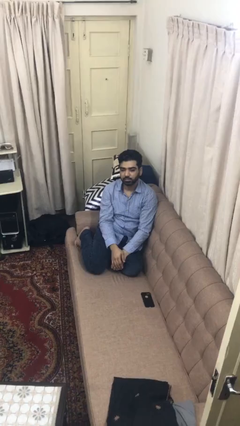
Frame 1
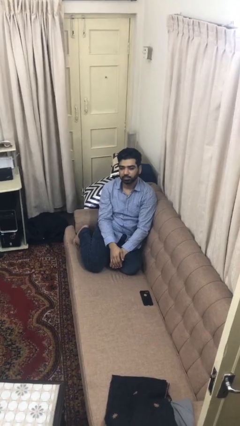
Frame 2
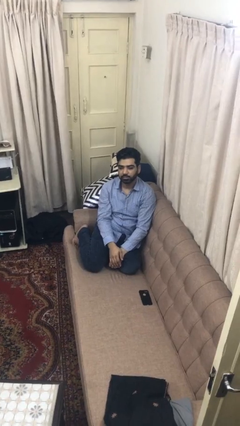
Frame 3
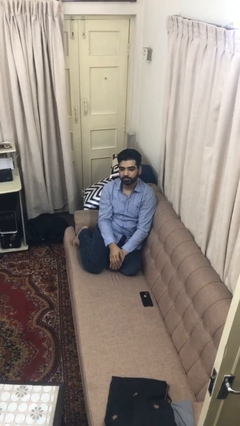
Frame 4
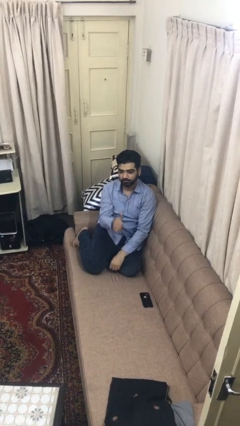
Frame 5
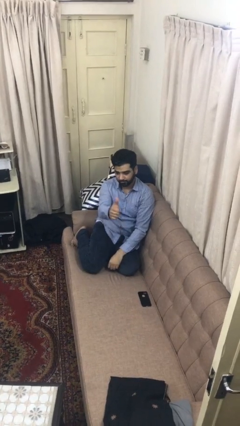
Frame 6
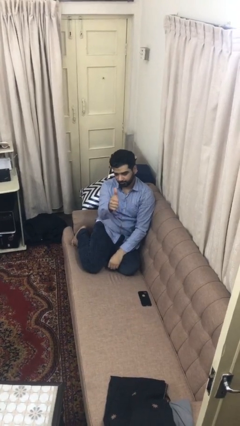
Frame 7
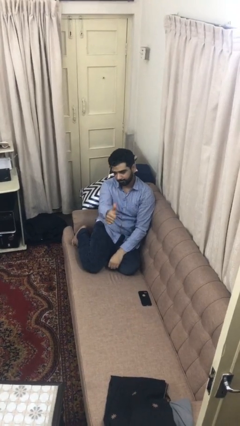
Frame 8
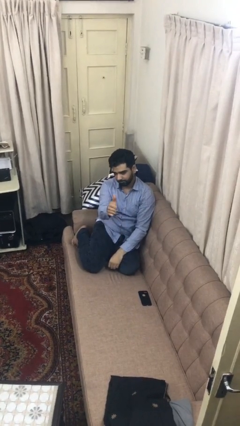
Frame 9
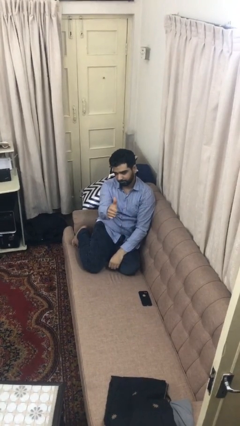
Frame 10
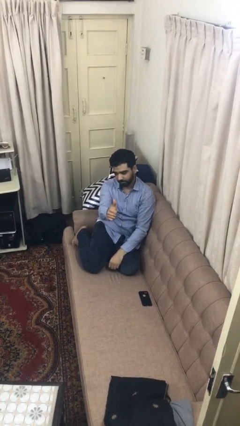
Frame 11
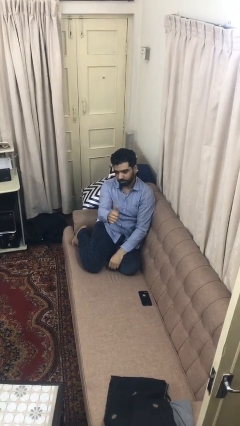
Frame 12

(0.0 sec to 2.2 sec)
person gestures thumbs up

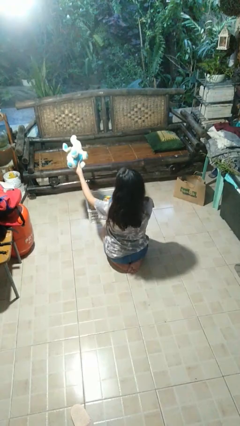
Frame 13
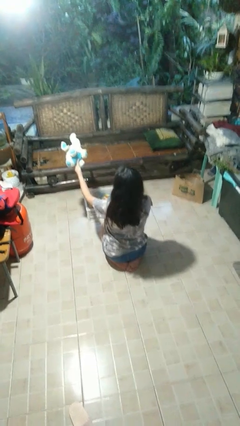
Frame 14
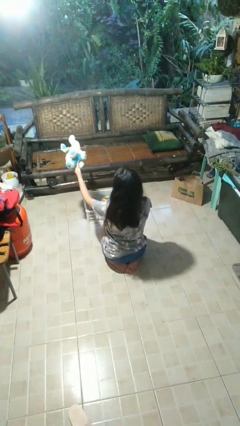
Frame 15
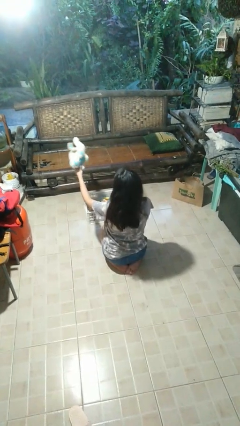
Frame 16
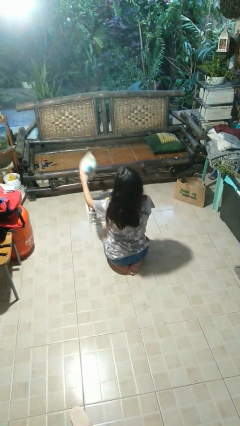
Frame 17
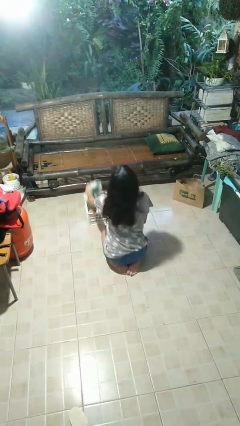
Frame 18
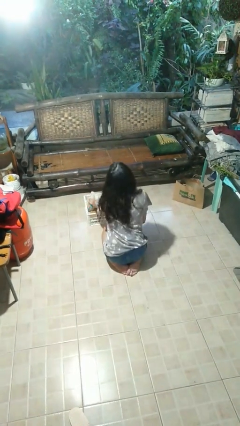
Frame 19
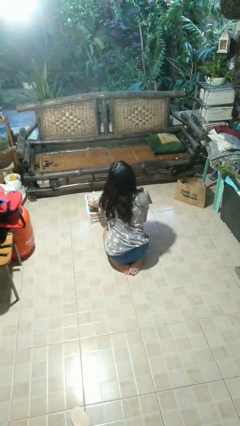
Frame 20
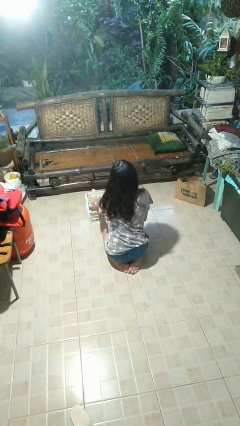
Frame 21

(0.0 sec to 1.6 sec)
person puts object into basket

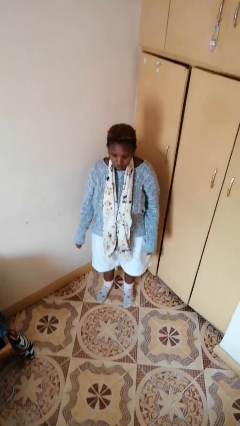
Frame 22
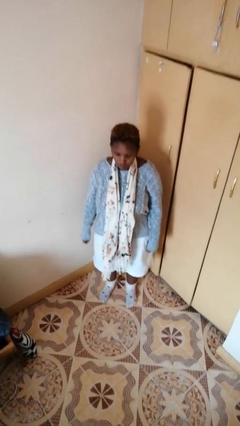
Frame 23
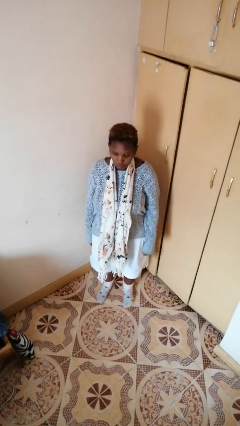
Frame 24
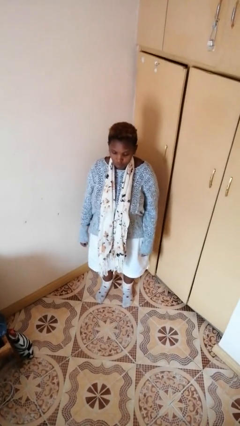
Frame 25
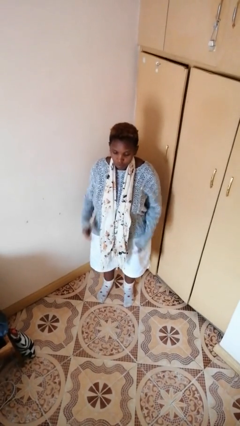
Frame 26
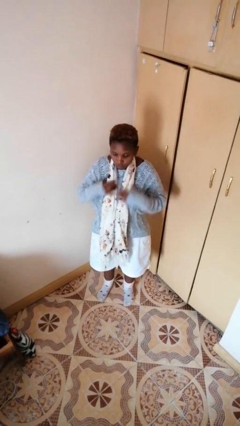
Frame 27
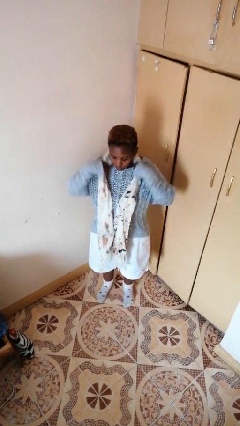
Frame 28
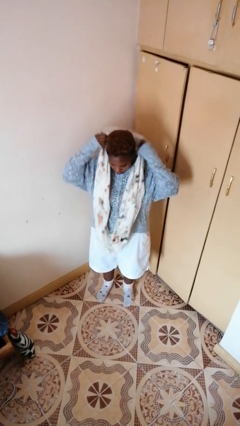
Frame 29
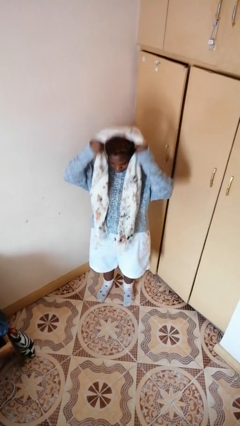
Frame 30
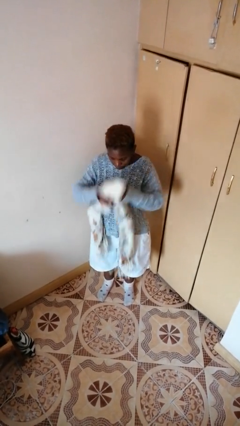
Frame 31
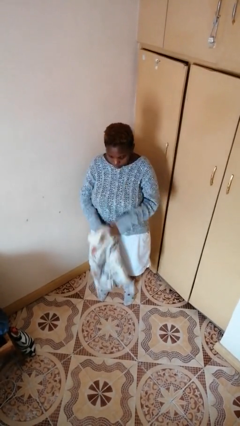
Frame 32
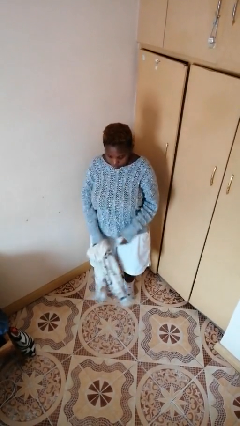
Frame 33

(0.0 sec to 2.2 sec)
person takes off scarf

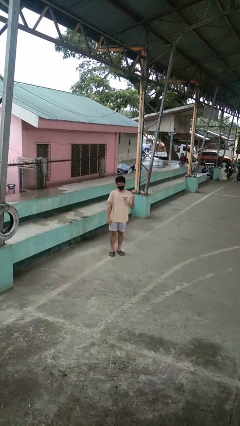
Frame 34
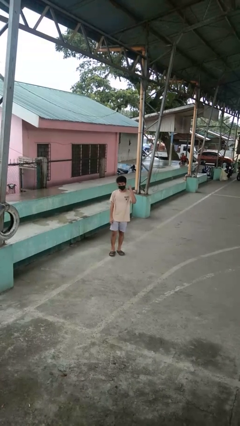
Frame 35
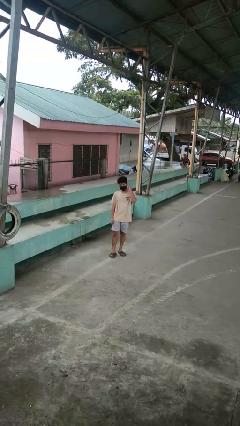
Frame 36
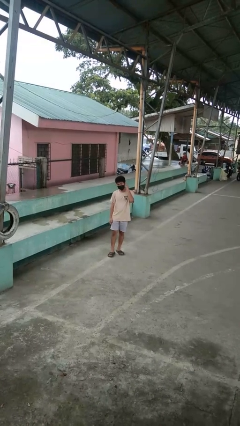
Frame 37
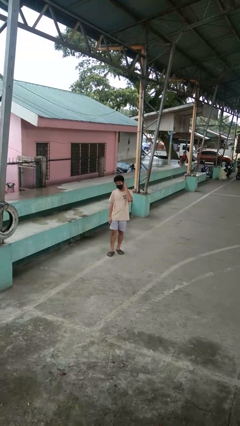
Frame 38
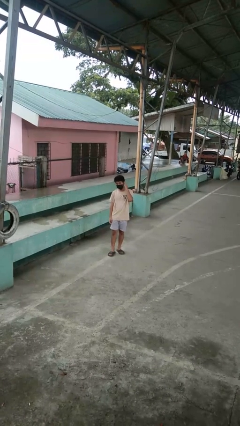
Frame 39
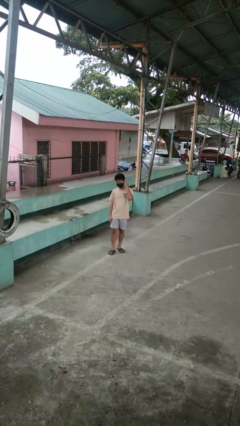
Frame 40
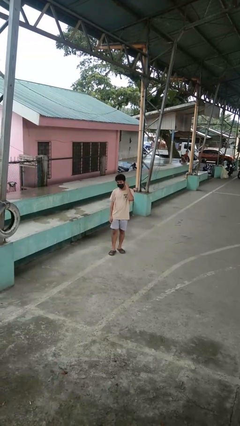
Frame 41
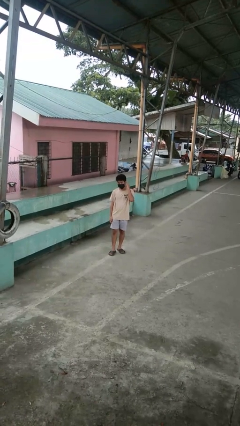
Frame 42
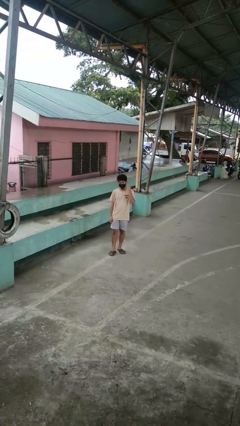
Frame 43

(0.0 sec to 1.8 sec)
person gestures listen closely

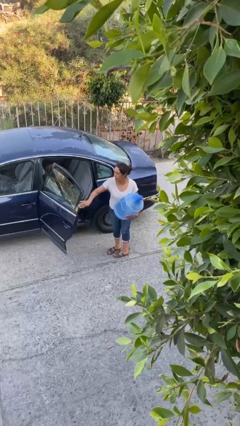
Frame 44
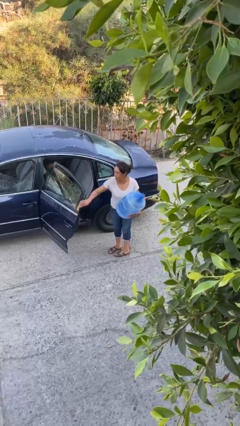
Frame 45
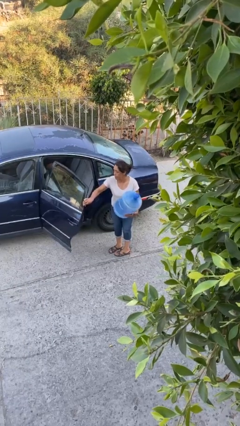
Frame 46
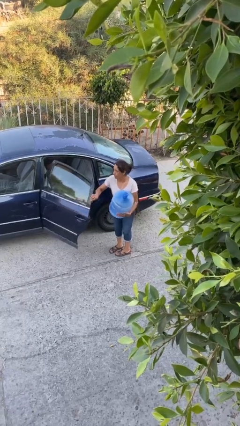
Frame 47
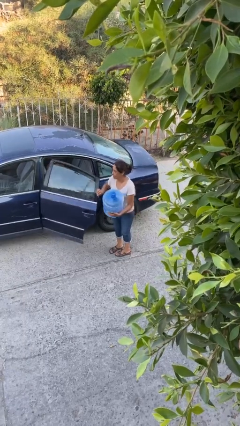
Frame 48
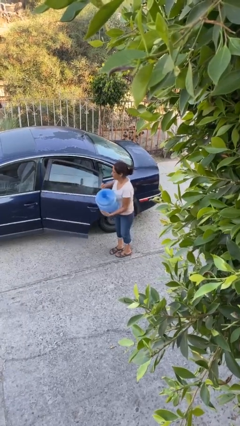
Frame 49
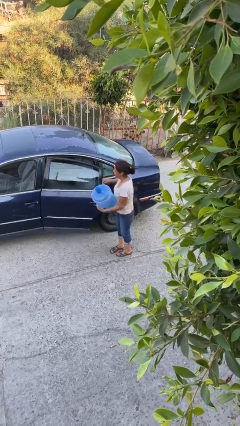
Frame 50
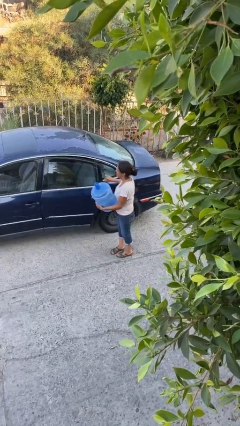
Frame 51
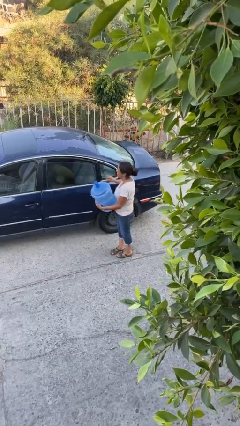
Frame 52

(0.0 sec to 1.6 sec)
person closes car door

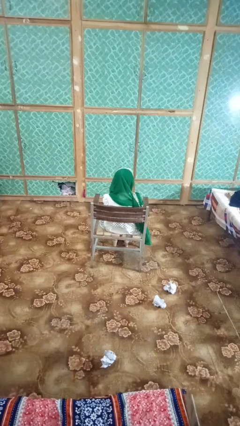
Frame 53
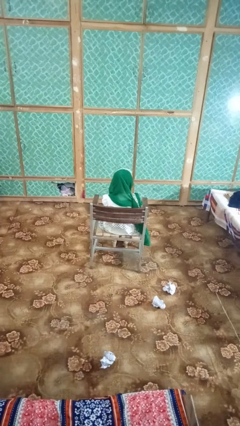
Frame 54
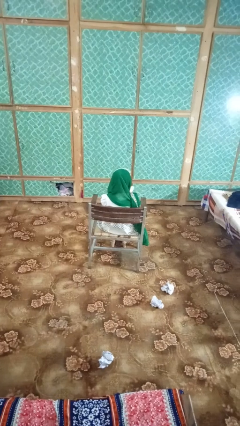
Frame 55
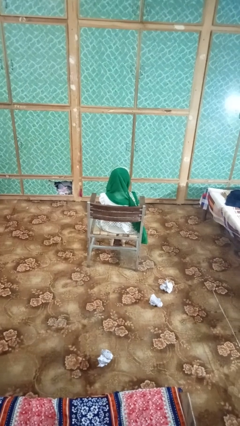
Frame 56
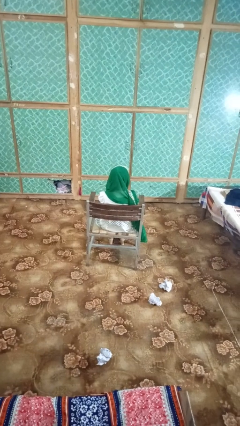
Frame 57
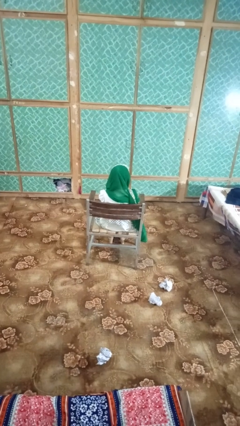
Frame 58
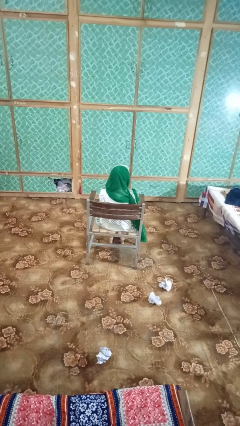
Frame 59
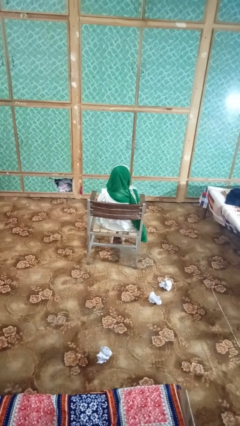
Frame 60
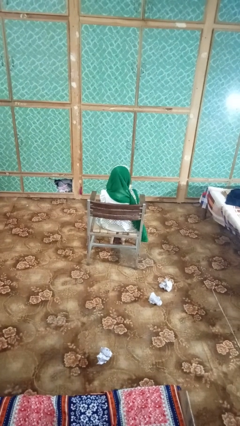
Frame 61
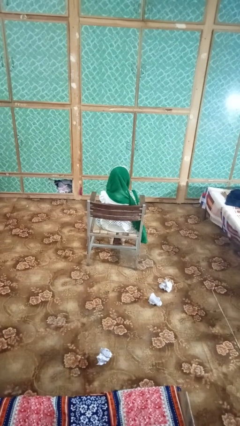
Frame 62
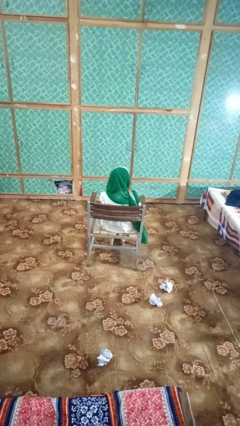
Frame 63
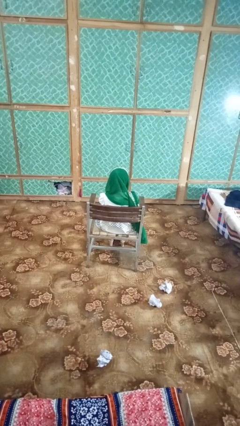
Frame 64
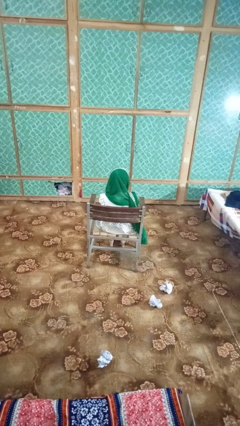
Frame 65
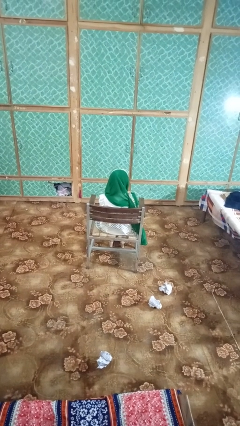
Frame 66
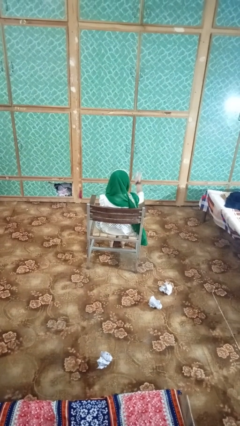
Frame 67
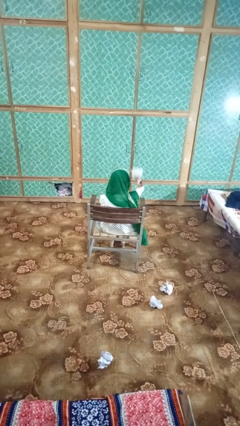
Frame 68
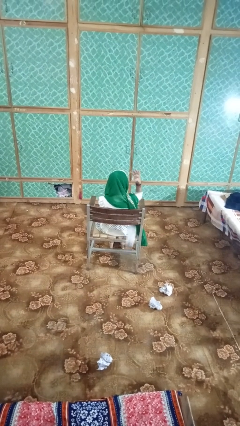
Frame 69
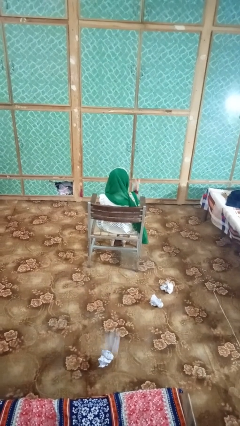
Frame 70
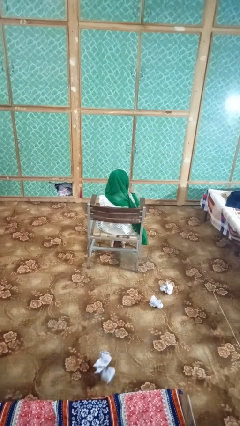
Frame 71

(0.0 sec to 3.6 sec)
person crumples paper

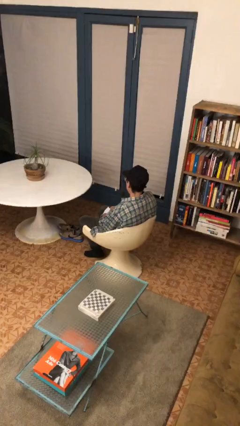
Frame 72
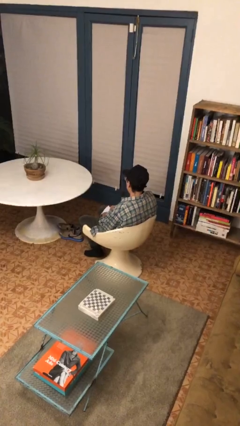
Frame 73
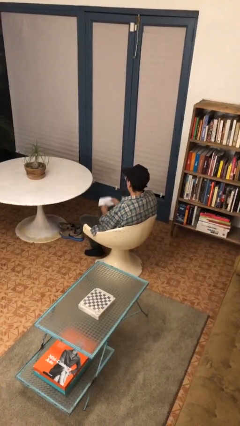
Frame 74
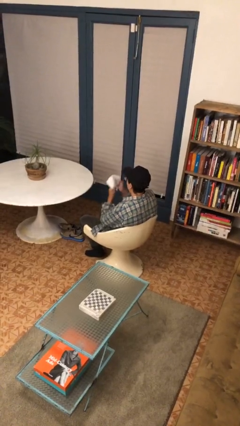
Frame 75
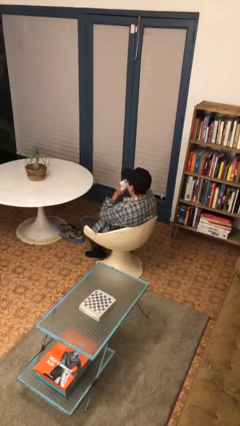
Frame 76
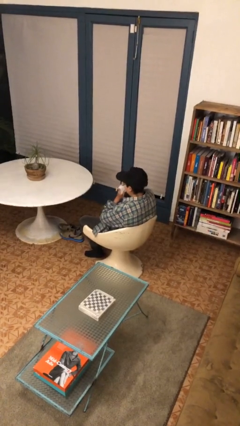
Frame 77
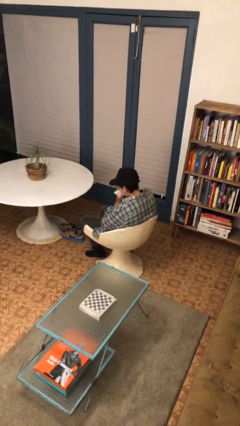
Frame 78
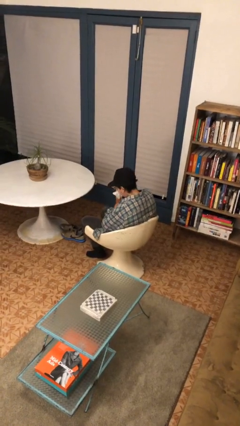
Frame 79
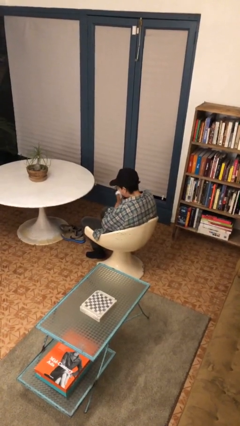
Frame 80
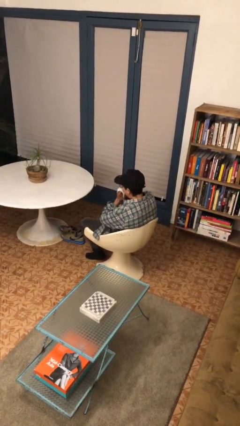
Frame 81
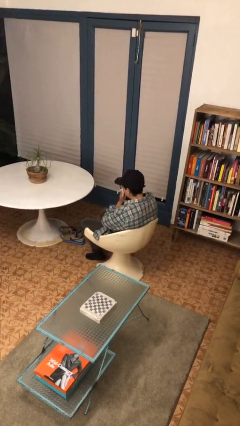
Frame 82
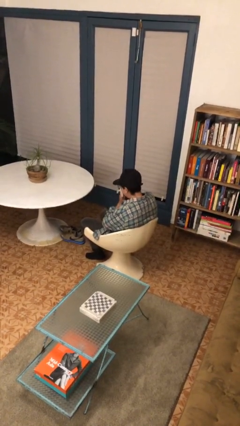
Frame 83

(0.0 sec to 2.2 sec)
person blows nose

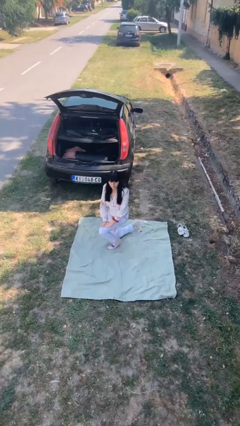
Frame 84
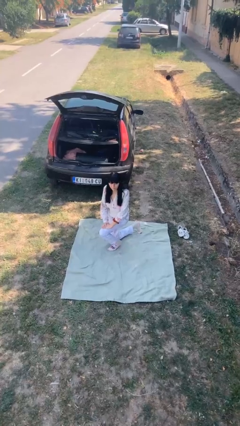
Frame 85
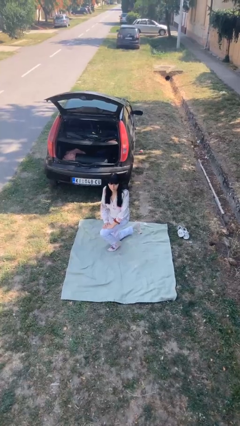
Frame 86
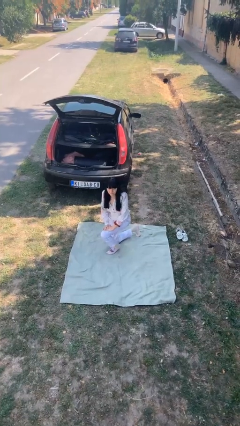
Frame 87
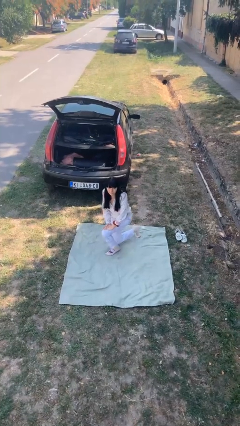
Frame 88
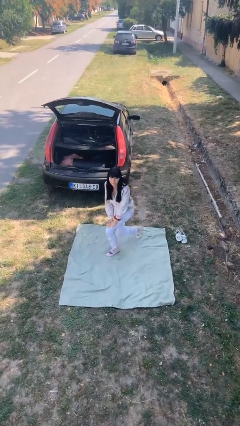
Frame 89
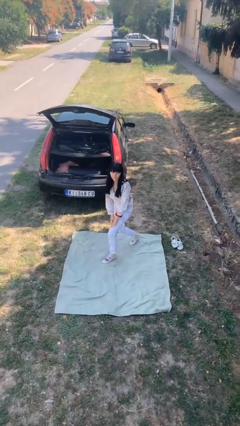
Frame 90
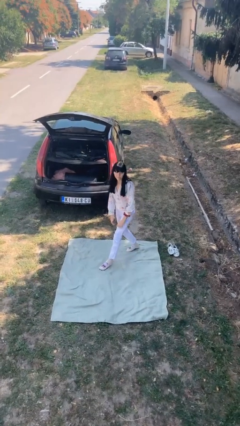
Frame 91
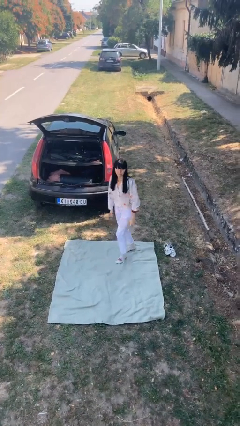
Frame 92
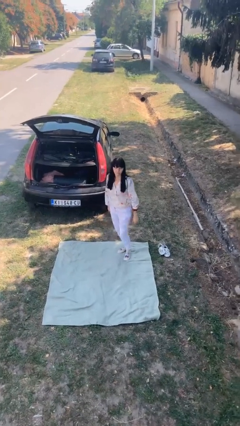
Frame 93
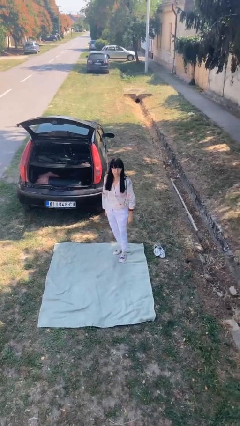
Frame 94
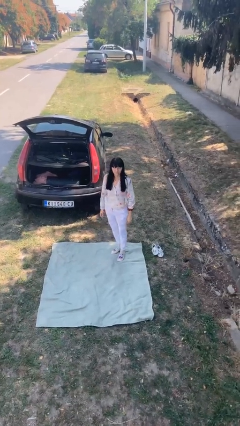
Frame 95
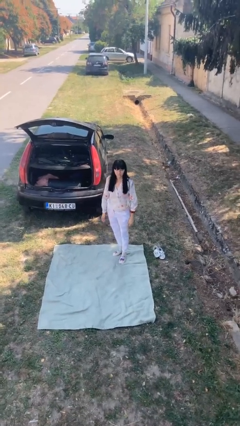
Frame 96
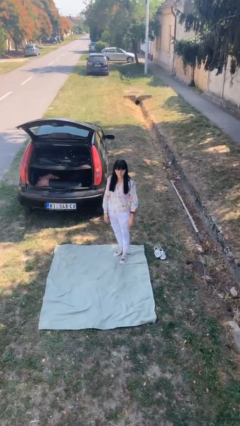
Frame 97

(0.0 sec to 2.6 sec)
person stands up from floor
